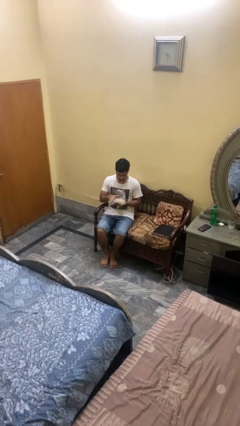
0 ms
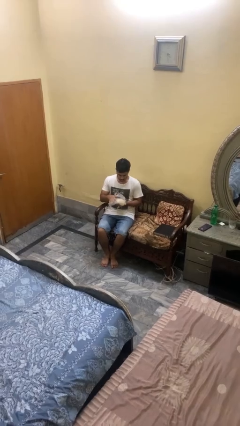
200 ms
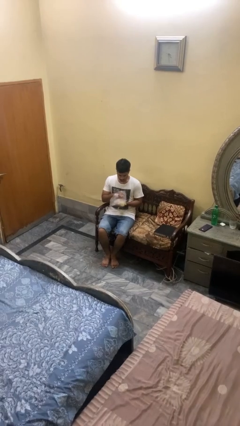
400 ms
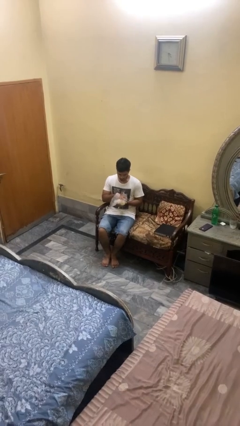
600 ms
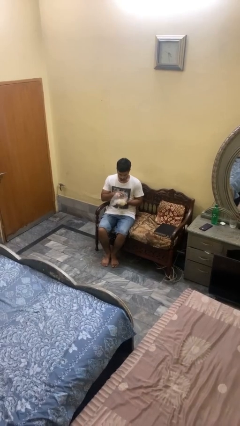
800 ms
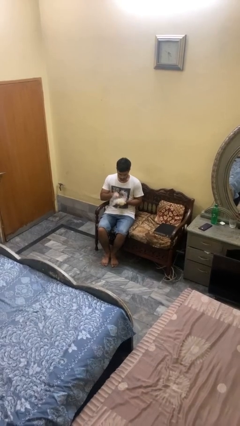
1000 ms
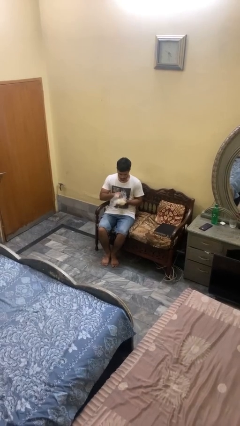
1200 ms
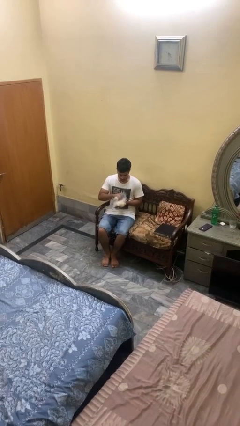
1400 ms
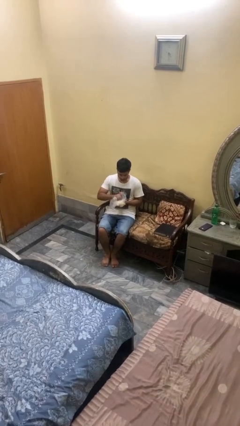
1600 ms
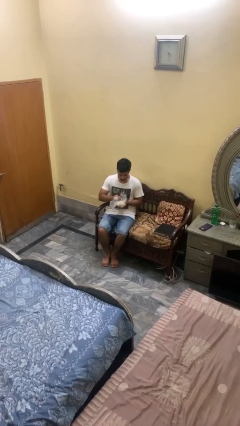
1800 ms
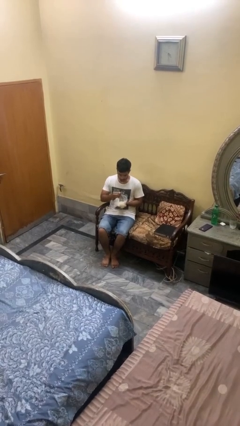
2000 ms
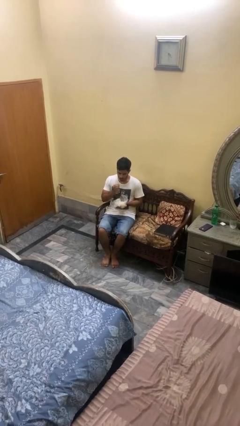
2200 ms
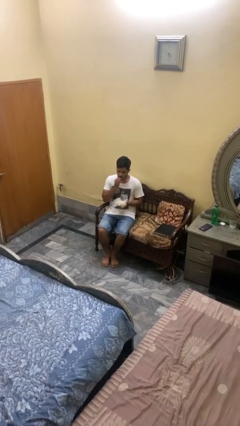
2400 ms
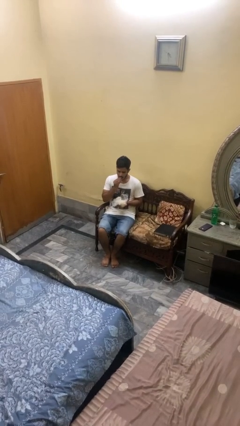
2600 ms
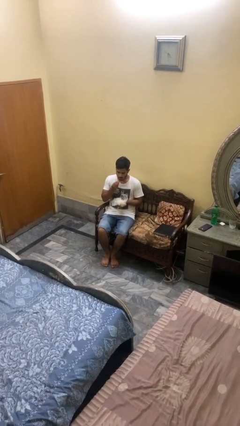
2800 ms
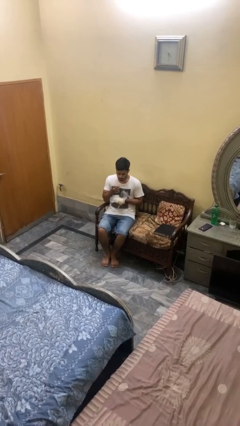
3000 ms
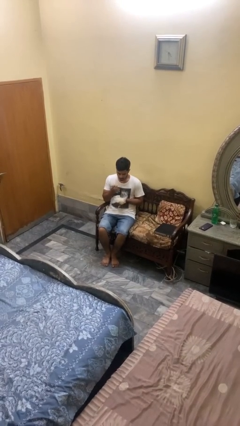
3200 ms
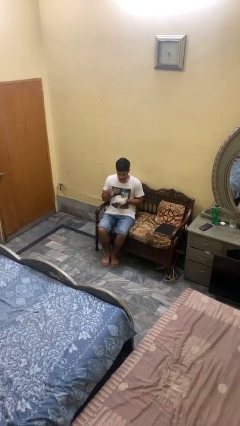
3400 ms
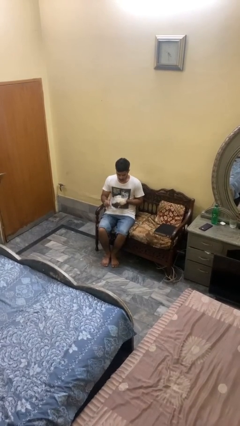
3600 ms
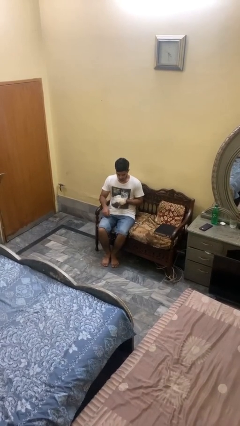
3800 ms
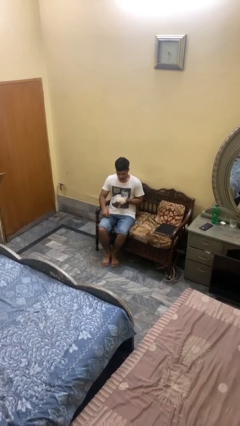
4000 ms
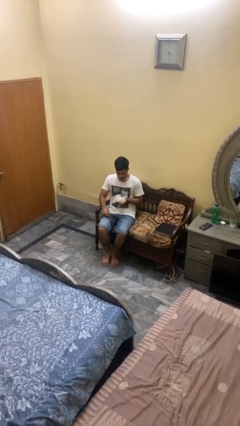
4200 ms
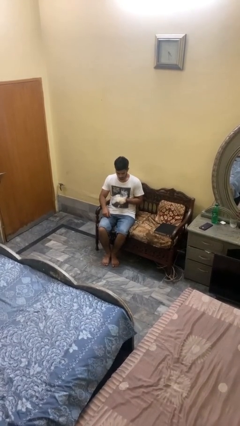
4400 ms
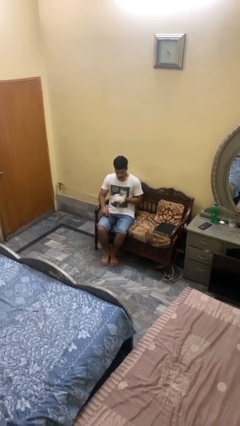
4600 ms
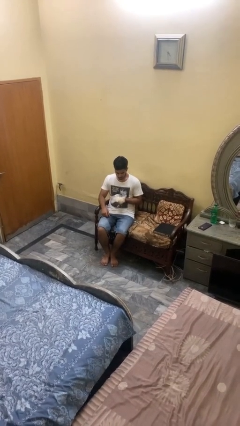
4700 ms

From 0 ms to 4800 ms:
person eats snack from bag

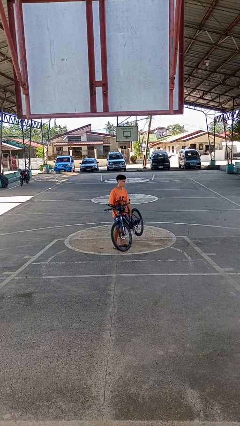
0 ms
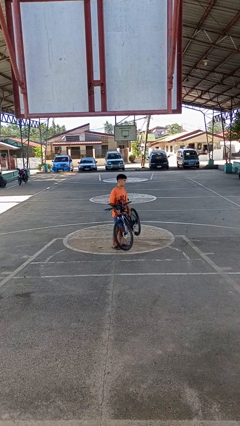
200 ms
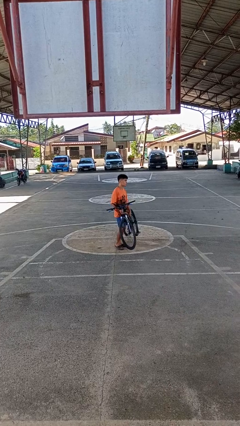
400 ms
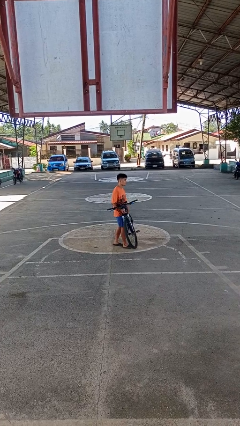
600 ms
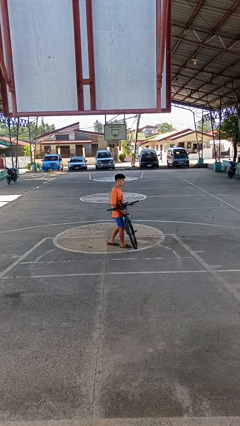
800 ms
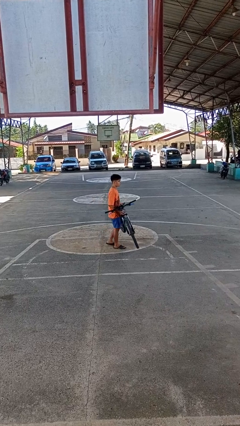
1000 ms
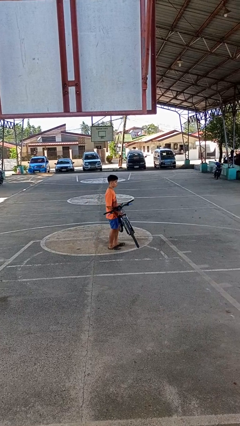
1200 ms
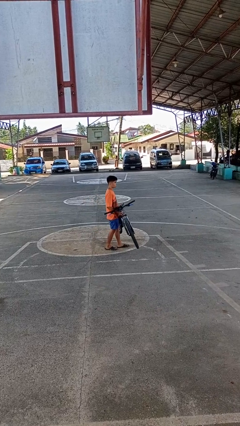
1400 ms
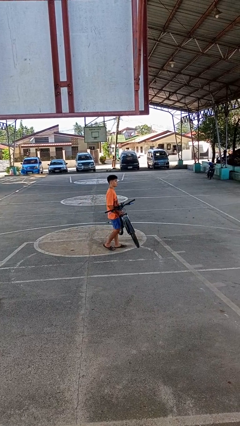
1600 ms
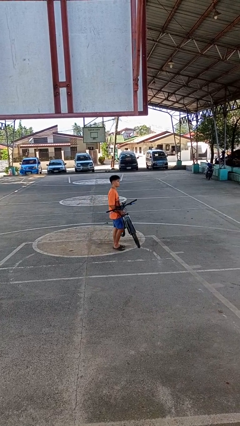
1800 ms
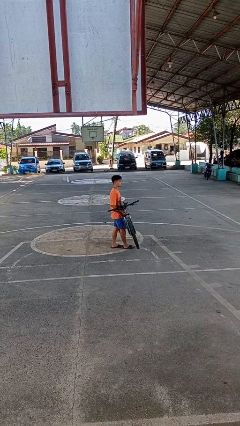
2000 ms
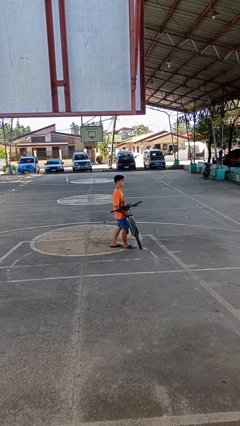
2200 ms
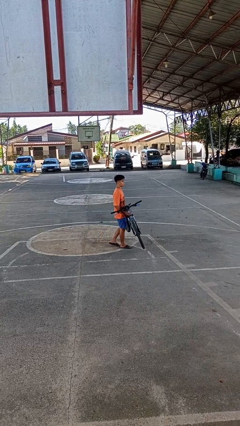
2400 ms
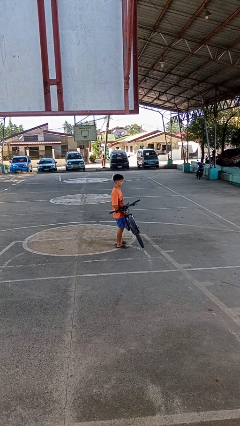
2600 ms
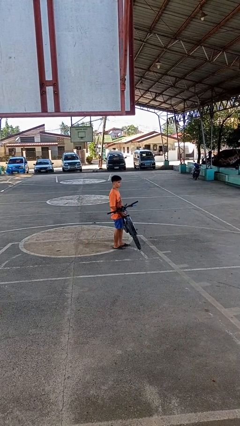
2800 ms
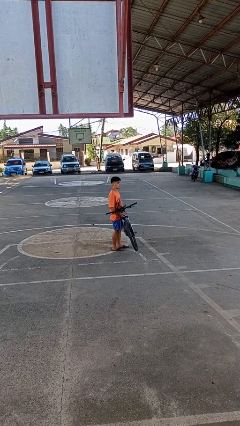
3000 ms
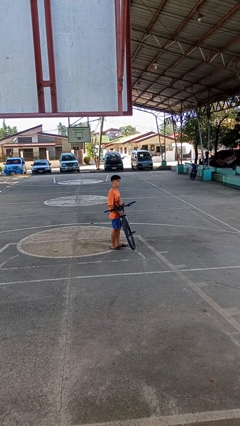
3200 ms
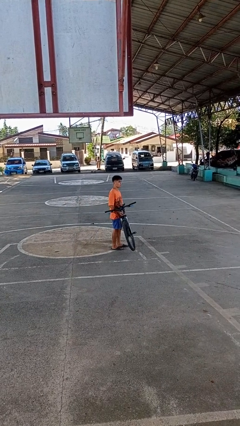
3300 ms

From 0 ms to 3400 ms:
person carries bicycle

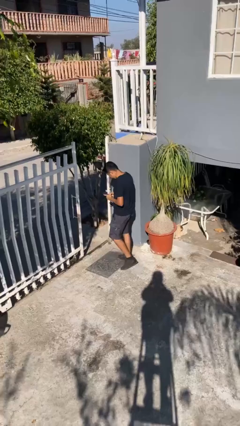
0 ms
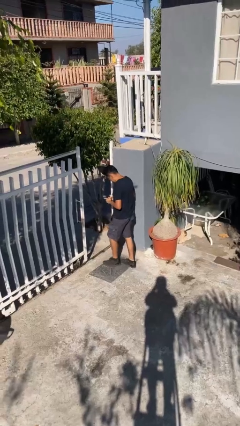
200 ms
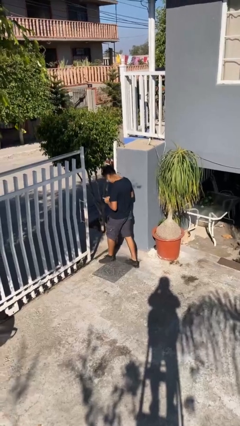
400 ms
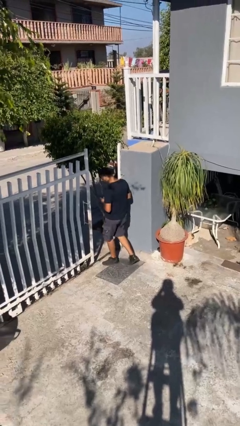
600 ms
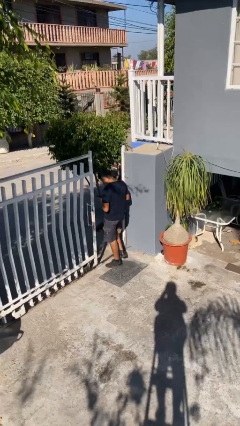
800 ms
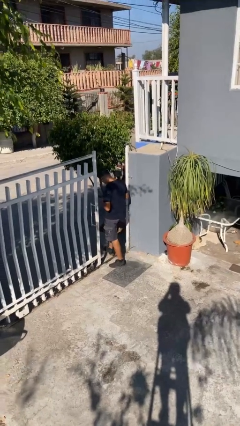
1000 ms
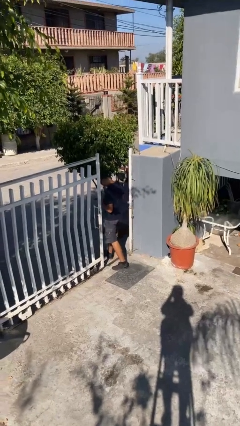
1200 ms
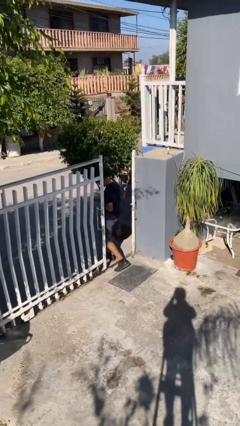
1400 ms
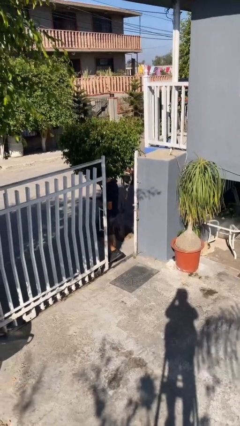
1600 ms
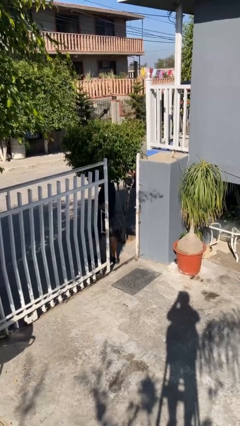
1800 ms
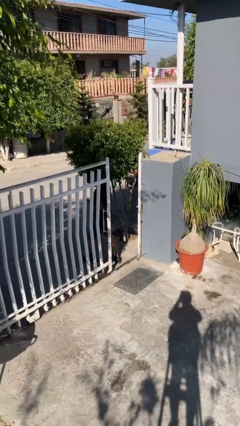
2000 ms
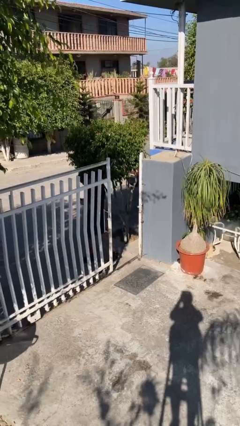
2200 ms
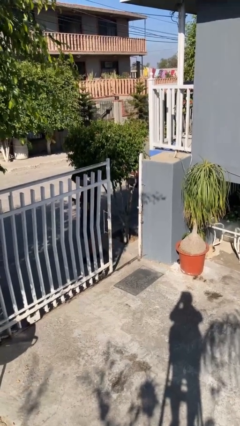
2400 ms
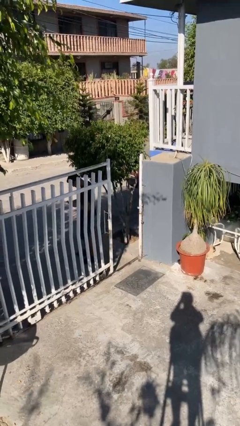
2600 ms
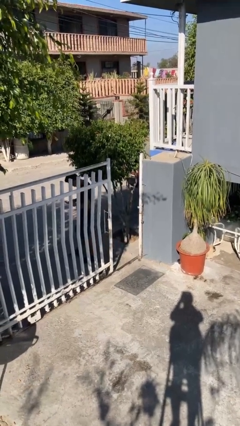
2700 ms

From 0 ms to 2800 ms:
person exits scene through structure

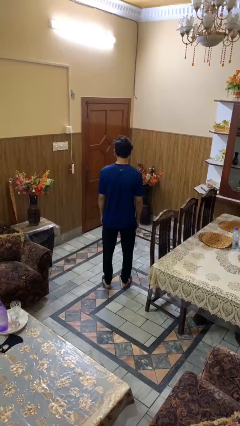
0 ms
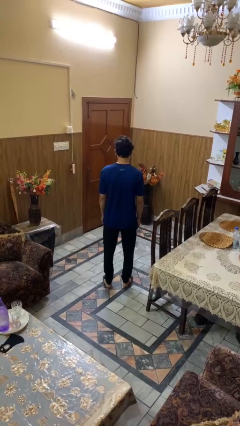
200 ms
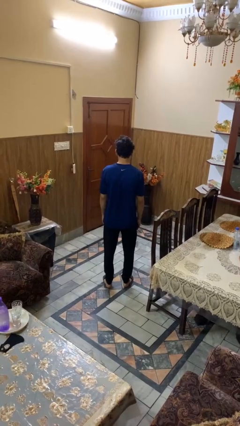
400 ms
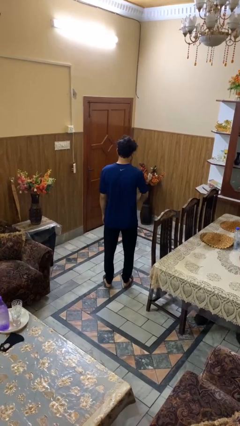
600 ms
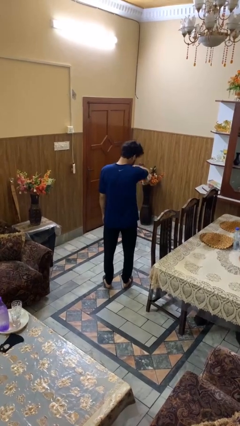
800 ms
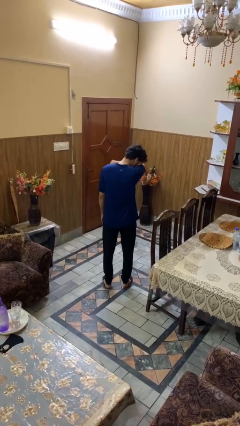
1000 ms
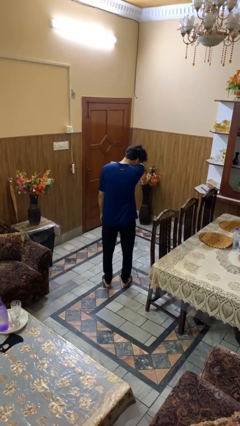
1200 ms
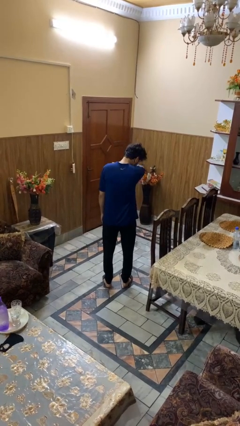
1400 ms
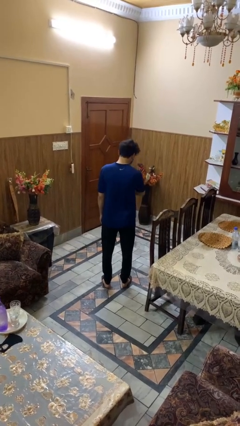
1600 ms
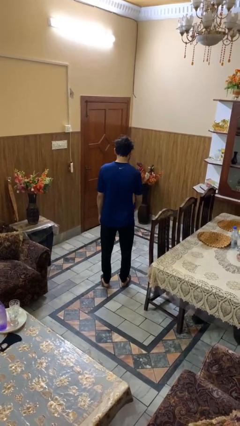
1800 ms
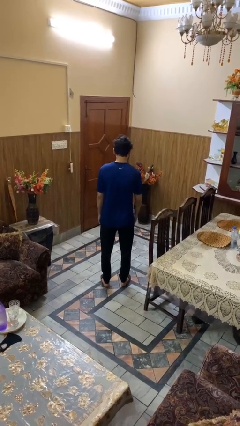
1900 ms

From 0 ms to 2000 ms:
person sneezes into arm

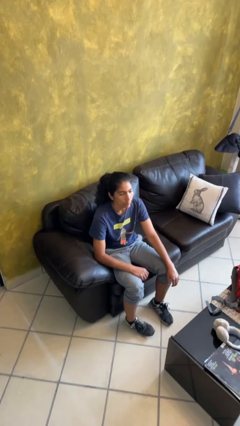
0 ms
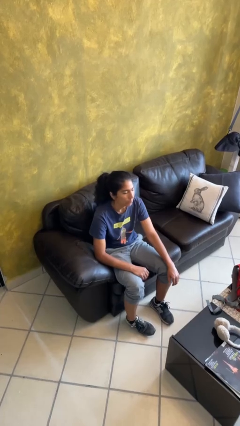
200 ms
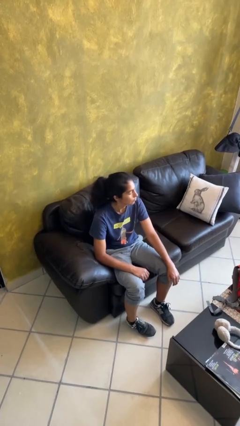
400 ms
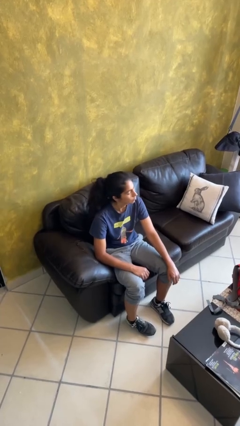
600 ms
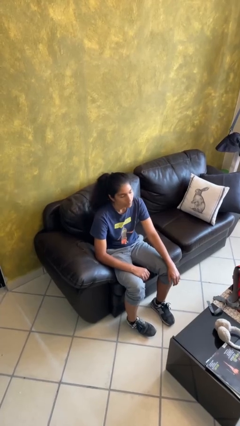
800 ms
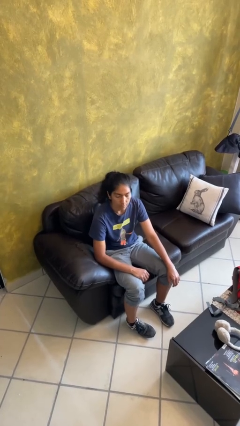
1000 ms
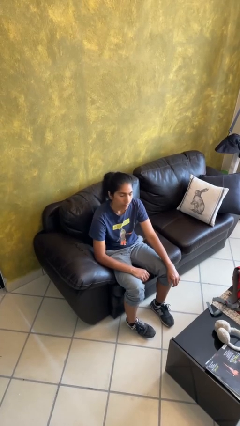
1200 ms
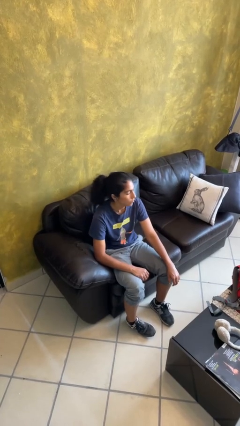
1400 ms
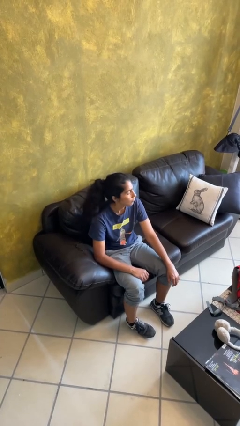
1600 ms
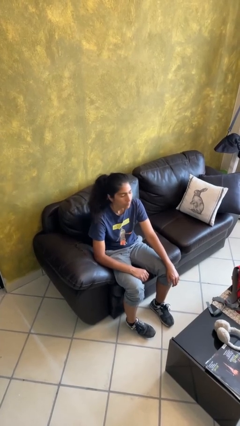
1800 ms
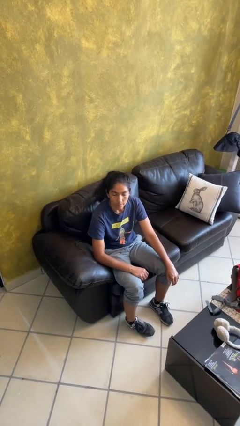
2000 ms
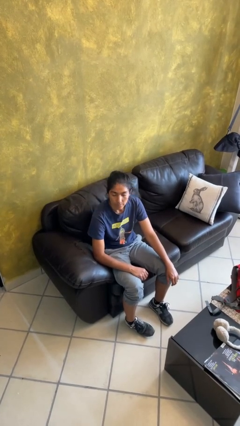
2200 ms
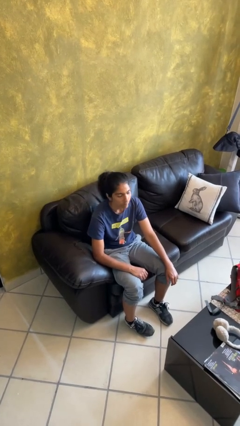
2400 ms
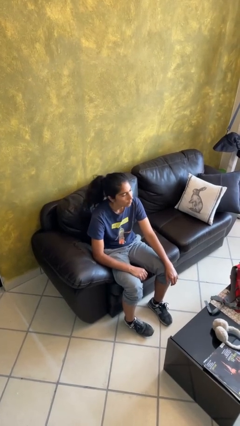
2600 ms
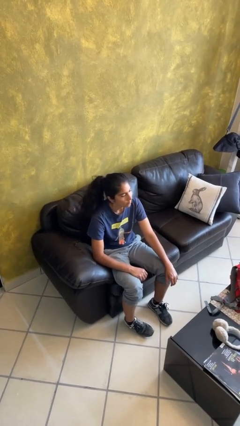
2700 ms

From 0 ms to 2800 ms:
person shakes head

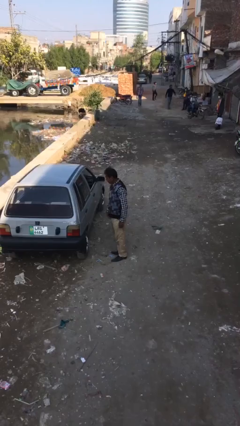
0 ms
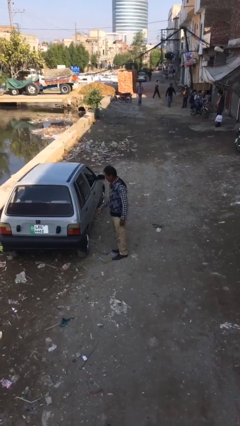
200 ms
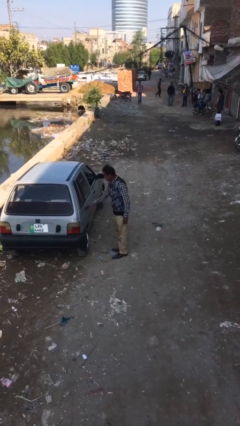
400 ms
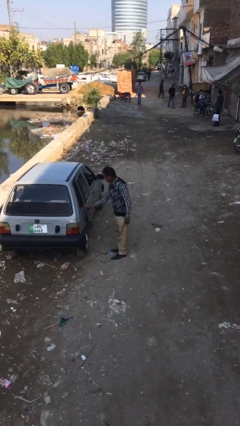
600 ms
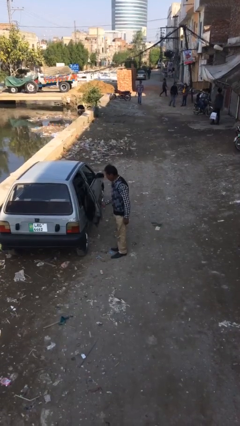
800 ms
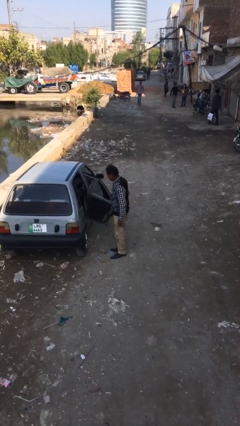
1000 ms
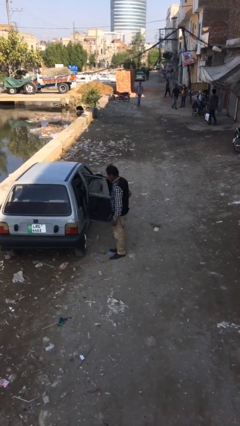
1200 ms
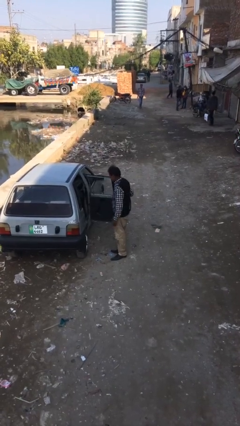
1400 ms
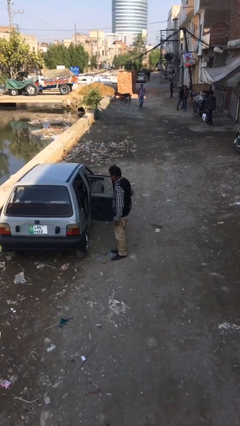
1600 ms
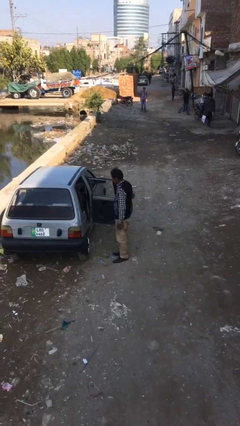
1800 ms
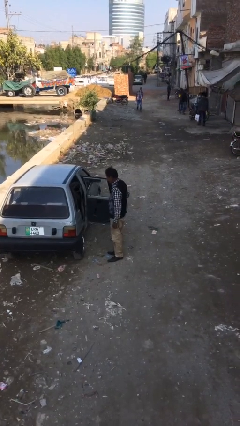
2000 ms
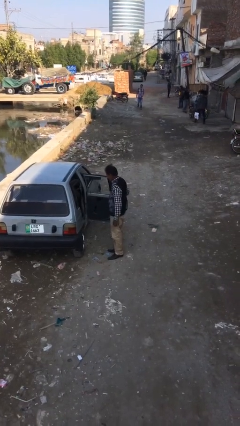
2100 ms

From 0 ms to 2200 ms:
person opens car door
